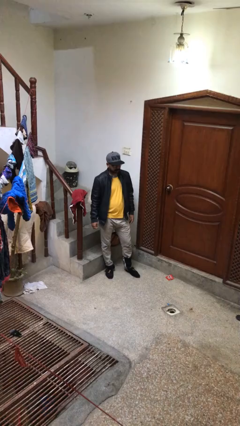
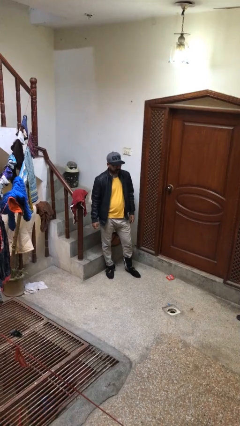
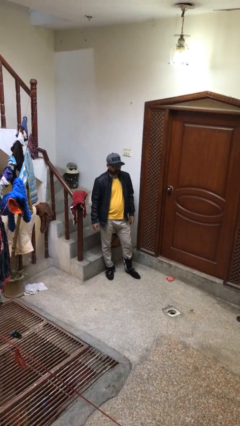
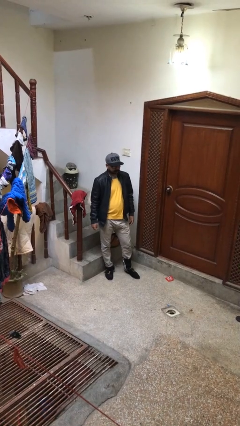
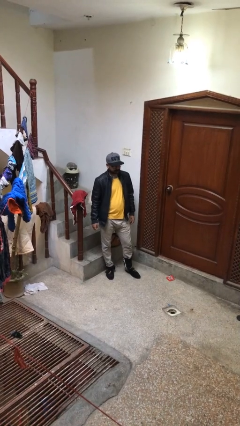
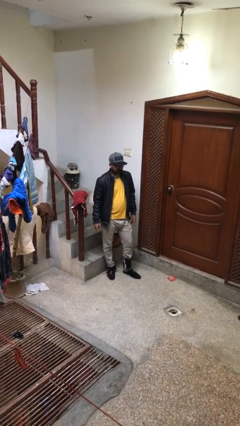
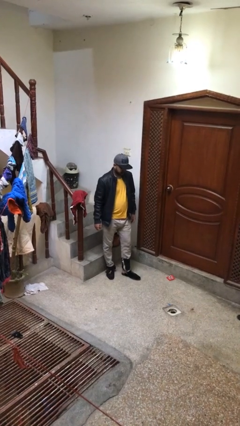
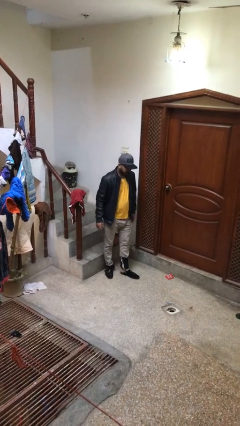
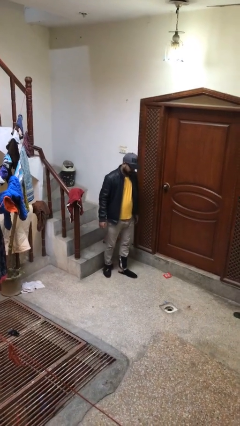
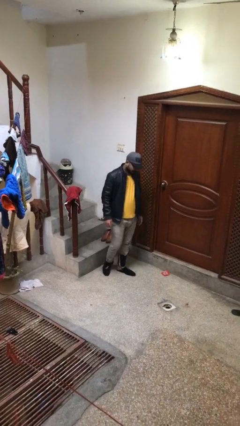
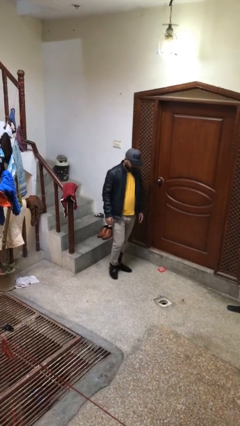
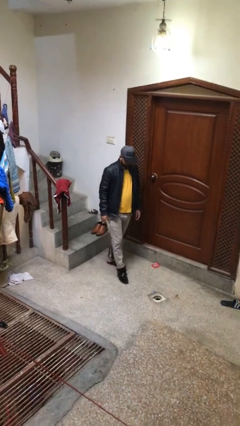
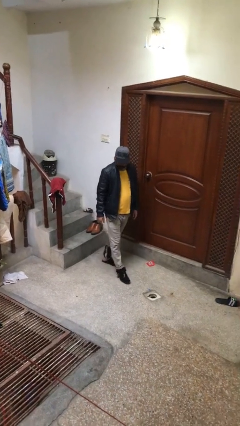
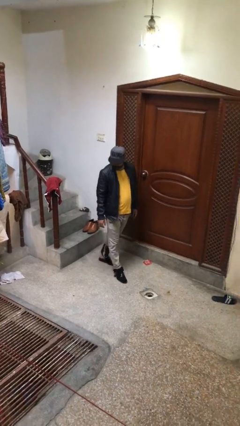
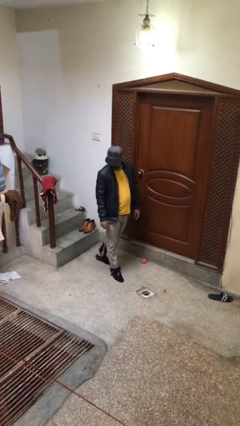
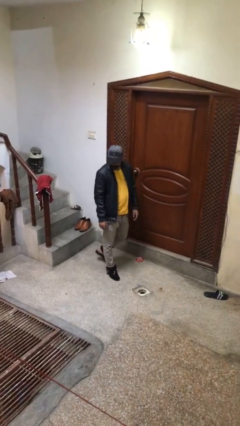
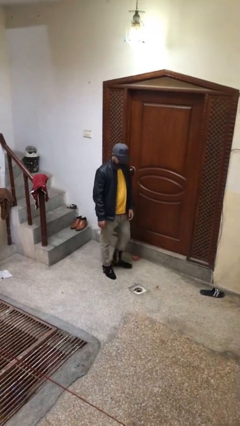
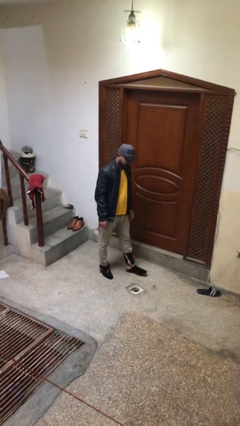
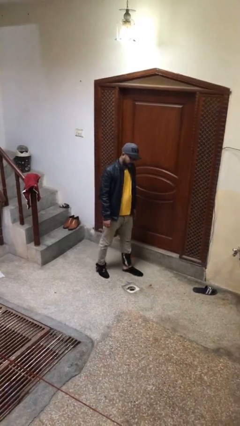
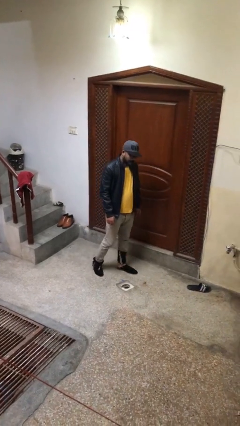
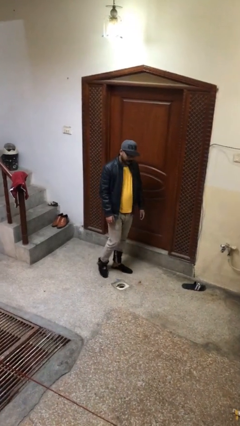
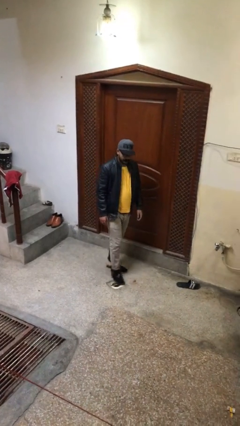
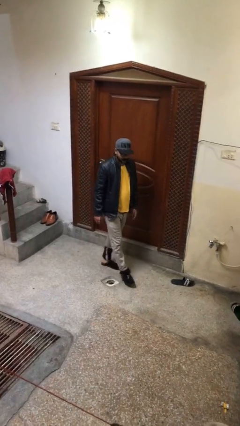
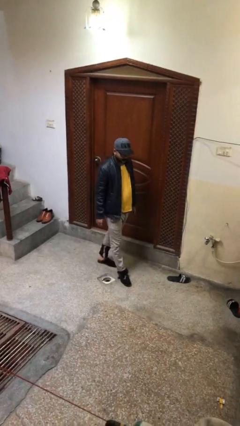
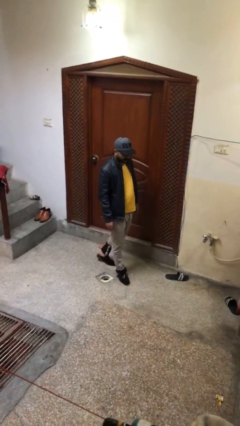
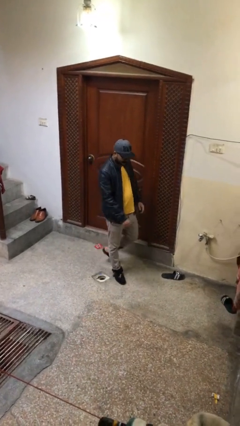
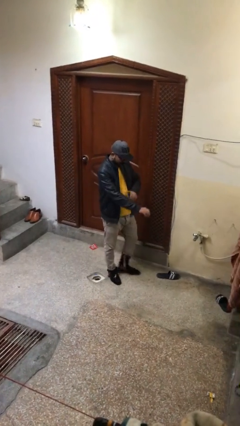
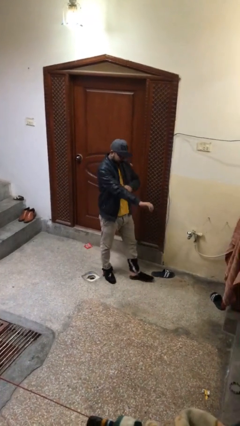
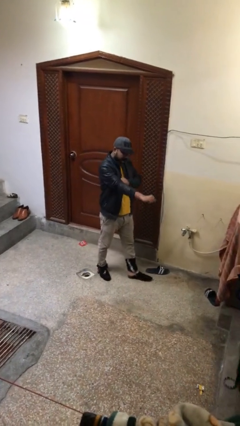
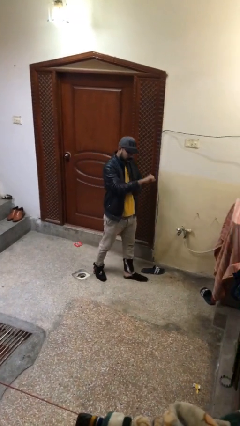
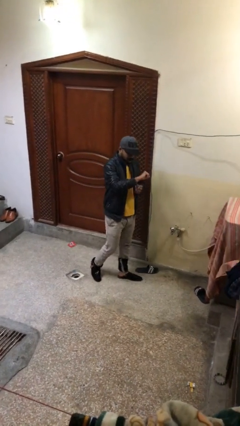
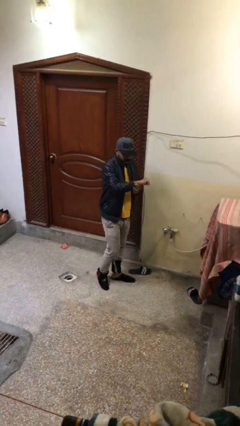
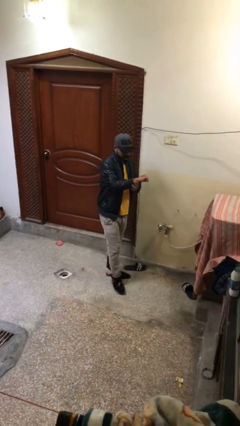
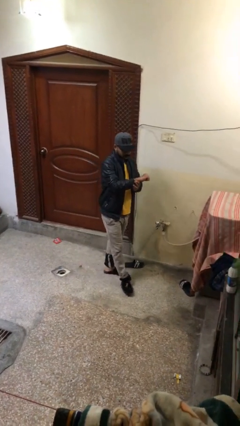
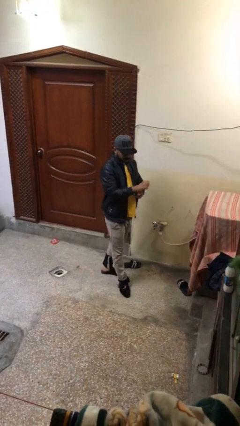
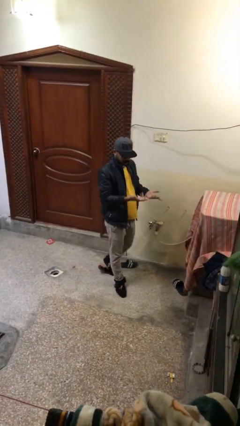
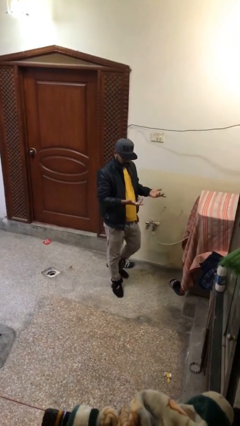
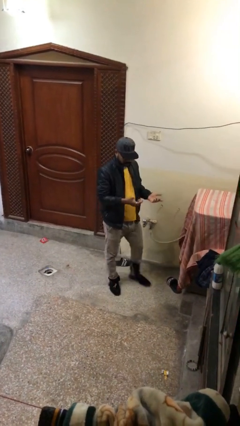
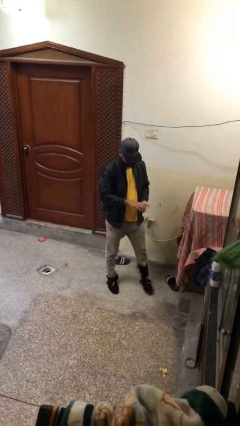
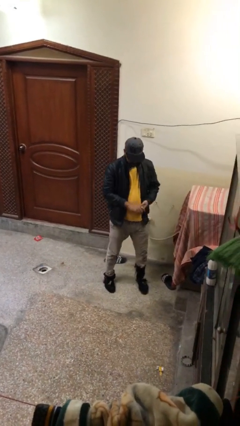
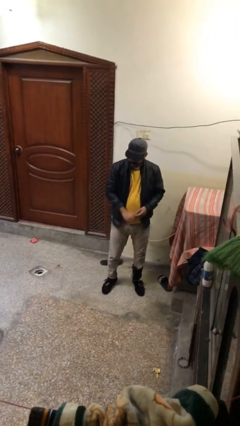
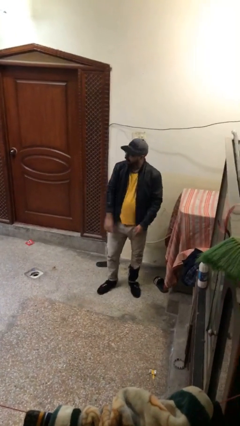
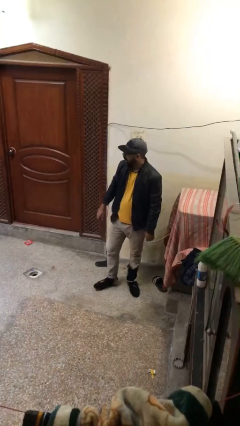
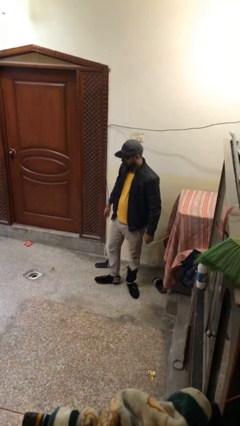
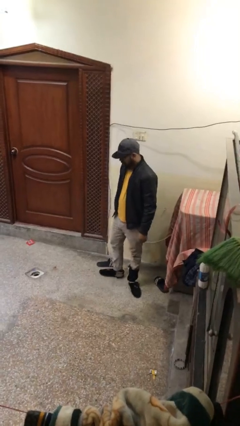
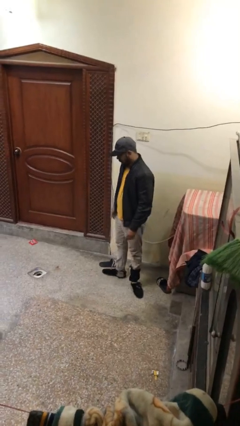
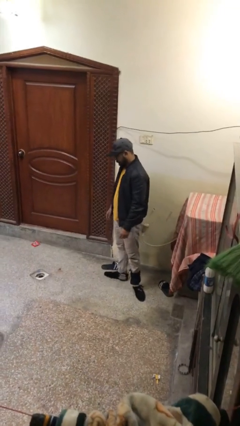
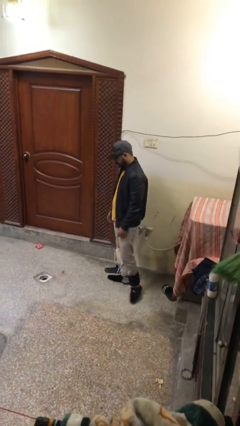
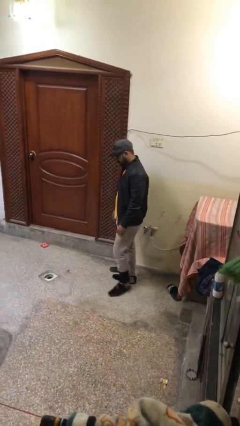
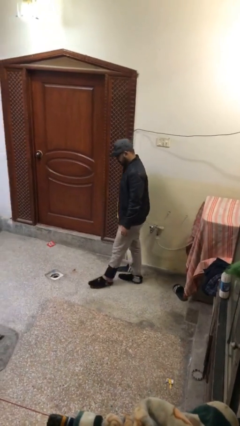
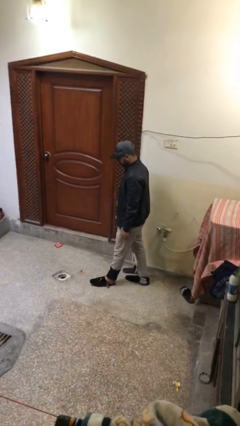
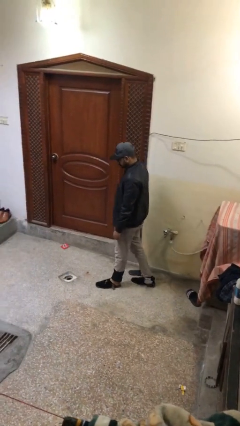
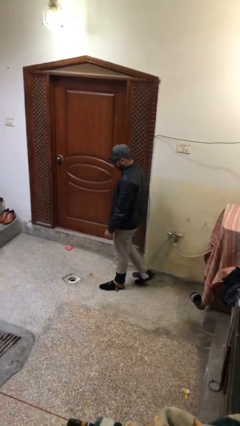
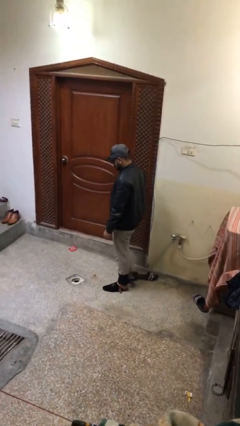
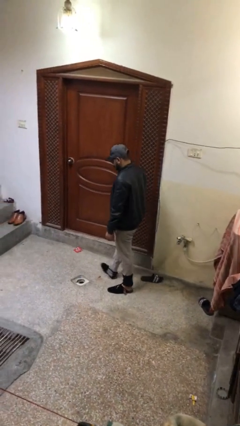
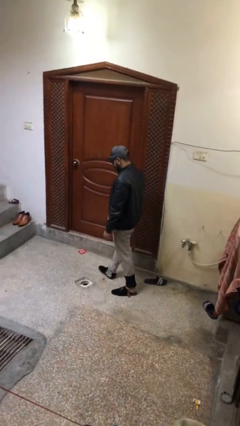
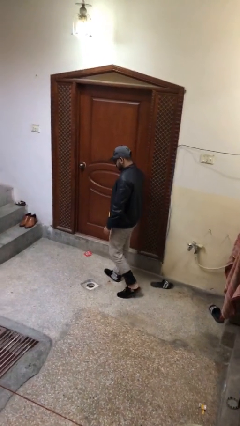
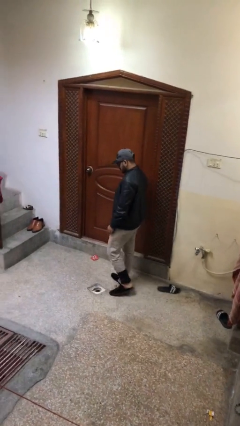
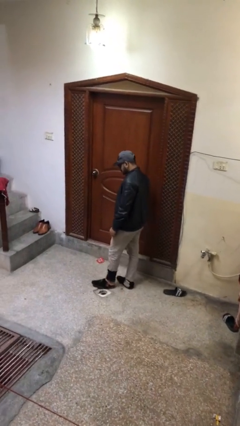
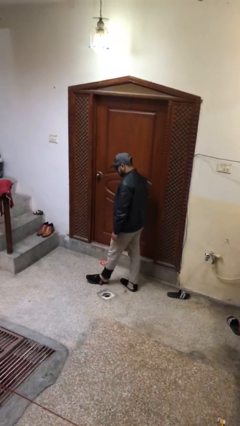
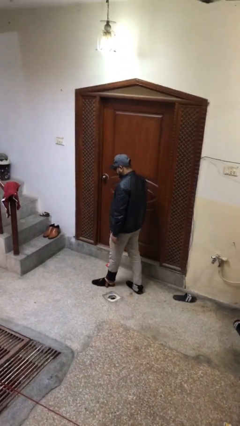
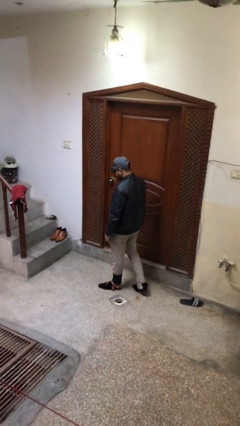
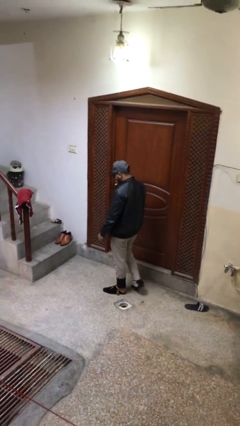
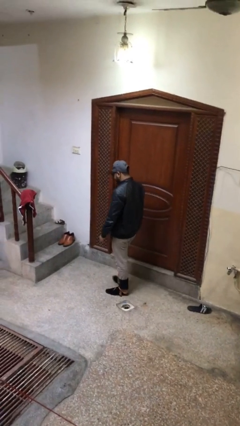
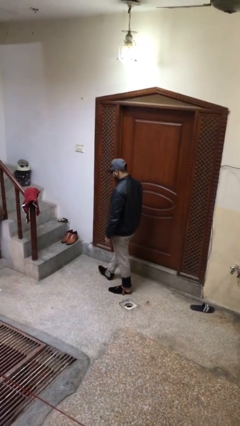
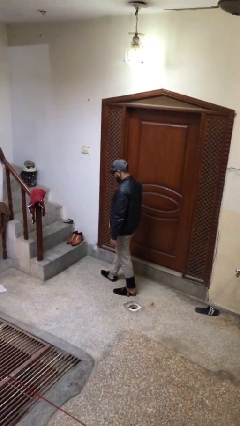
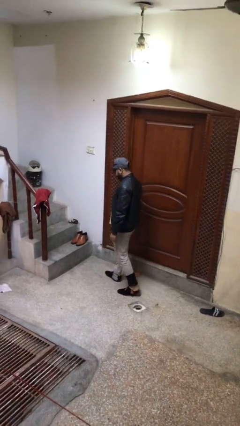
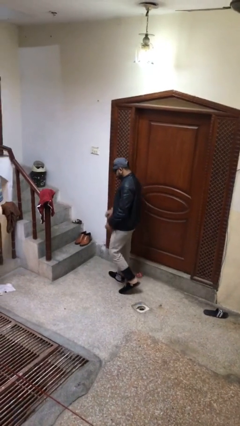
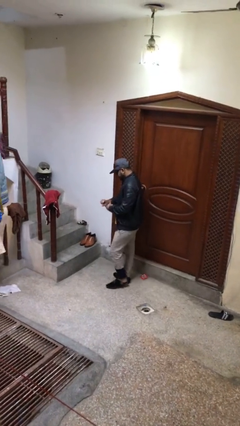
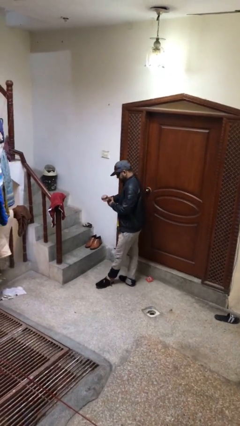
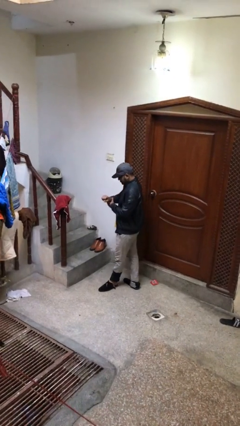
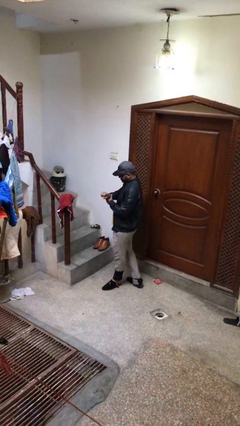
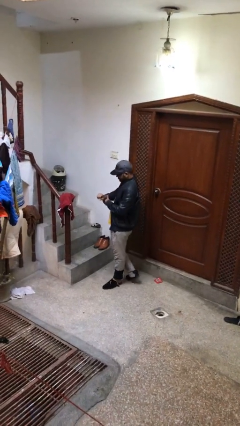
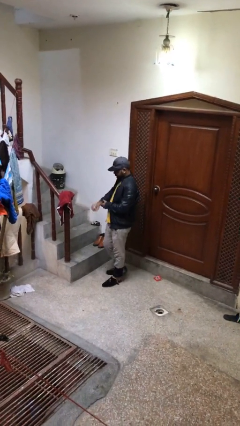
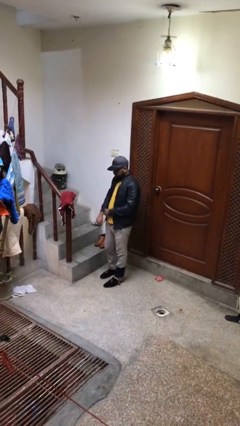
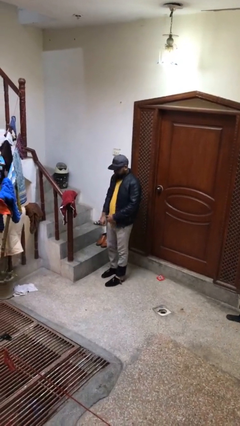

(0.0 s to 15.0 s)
person walks

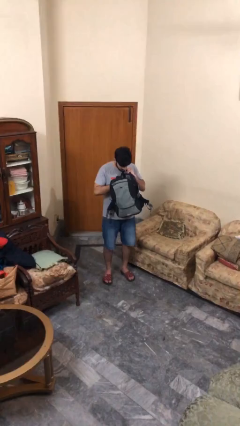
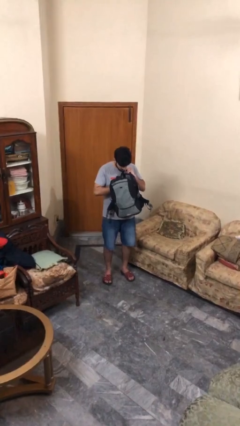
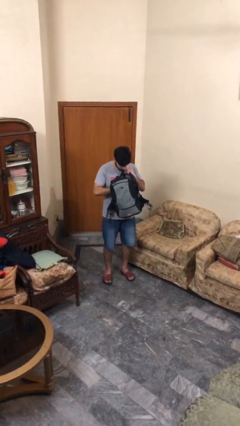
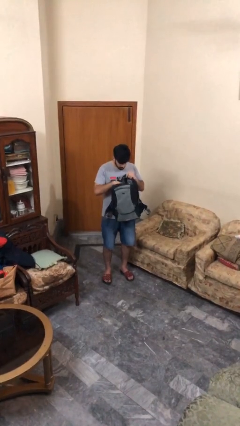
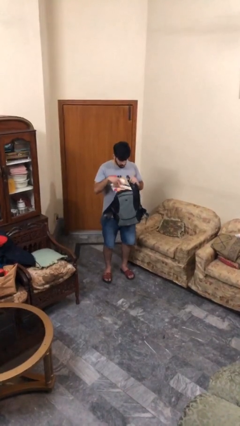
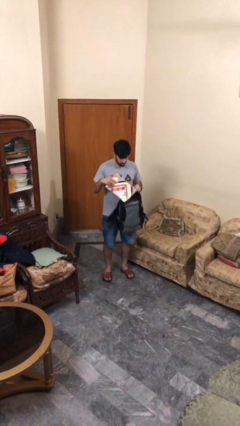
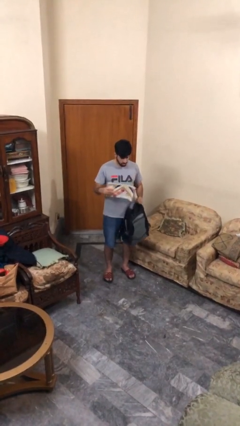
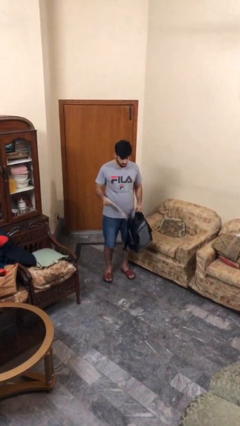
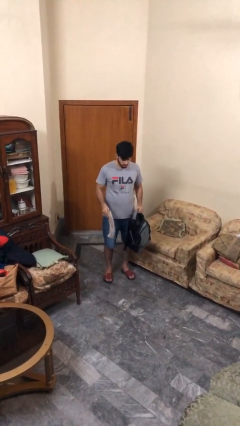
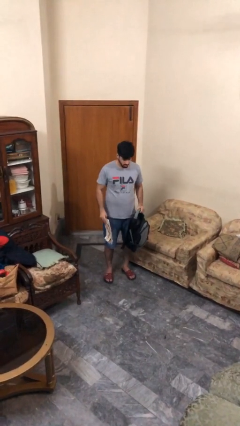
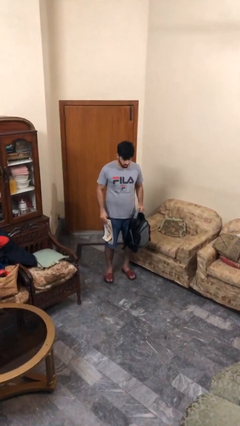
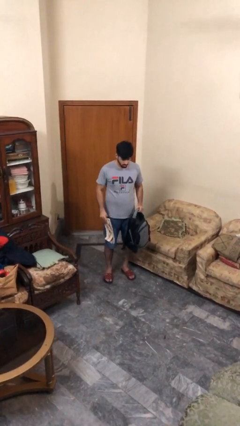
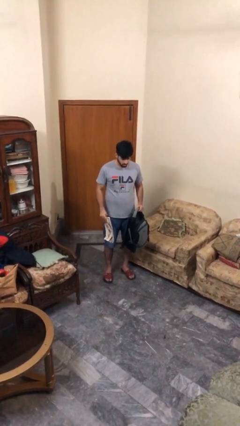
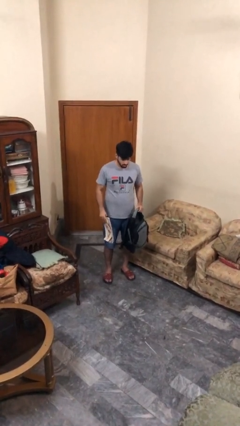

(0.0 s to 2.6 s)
person takes object from backpack

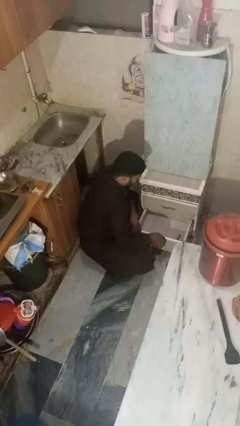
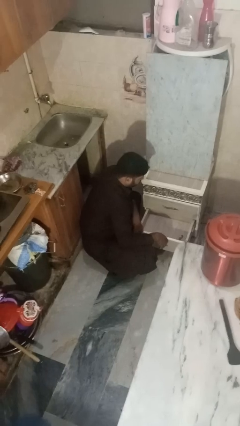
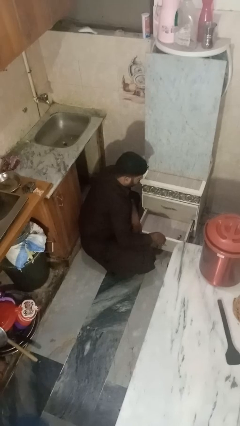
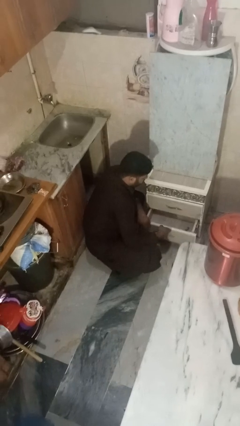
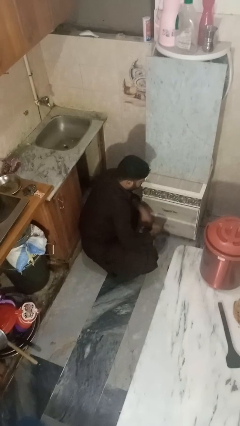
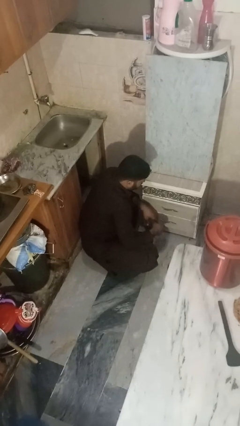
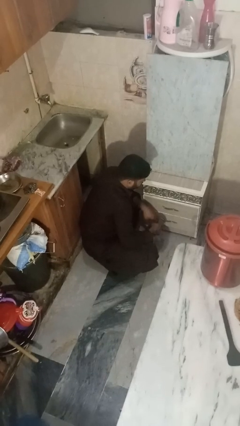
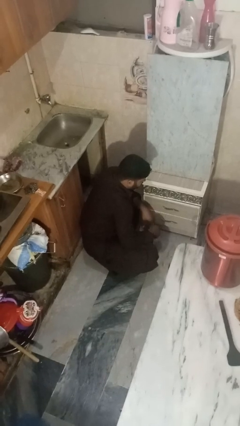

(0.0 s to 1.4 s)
person closes kitchen drawer
